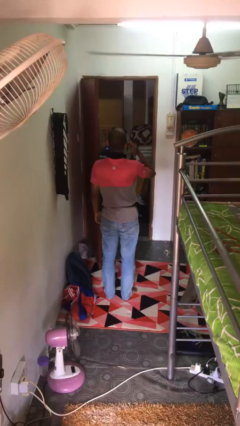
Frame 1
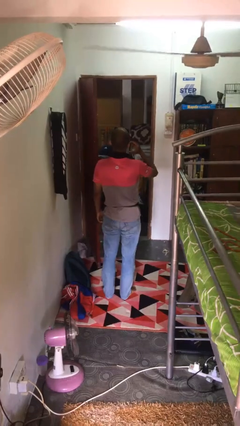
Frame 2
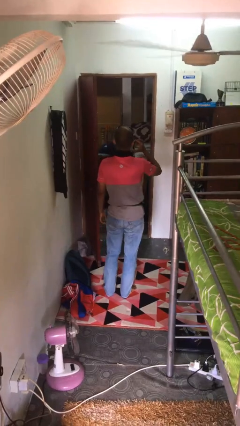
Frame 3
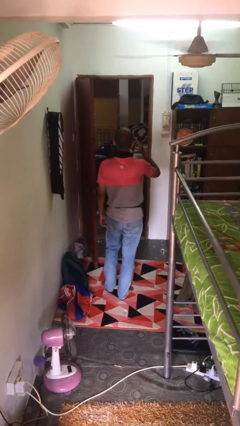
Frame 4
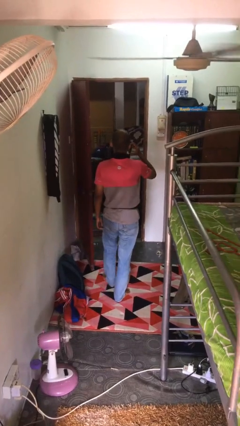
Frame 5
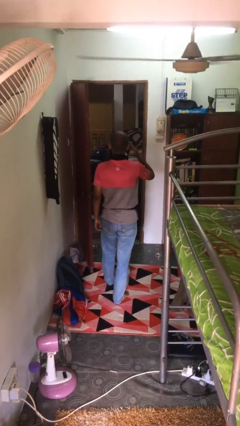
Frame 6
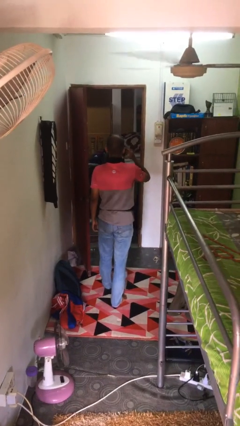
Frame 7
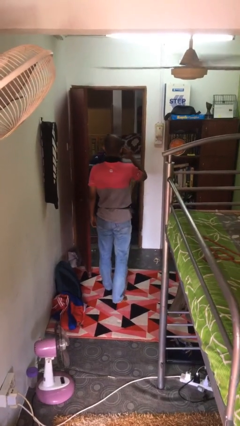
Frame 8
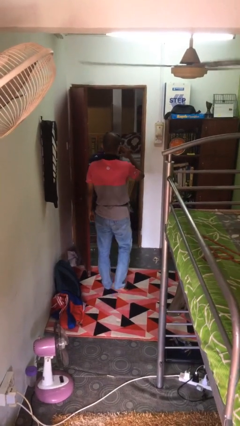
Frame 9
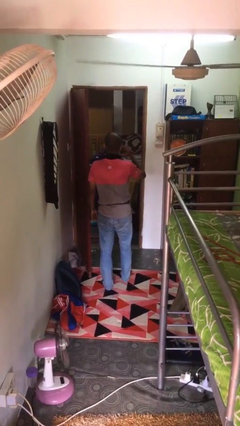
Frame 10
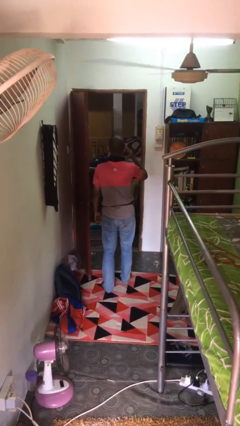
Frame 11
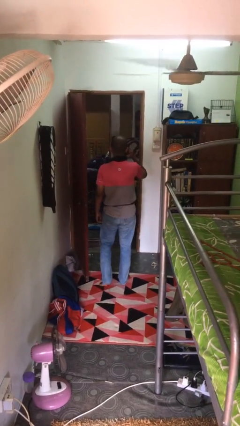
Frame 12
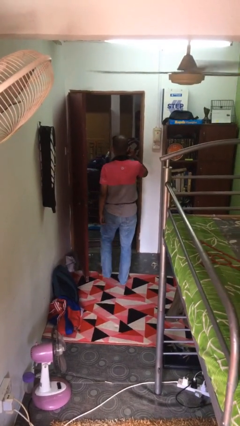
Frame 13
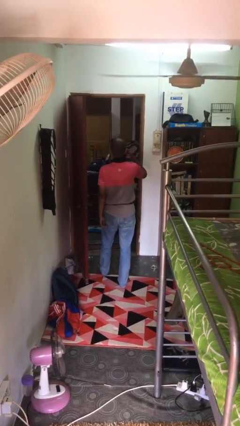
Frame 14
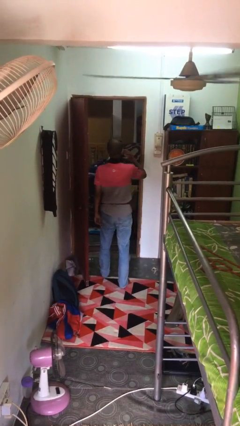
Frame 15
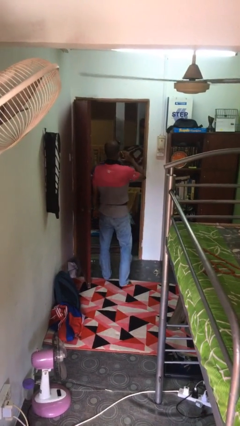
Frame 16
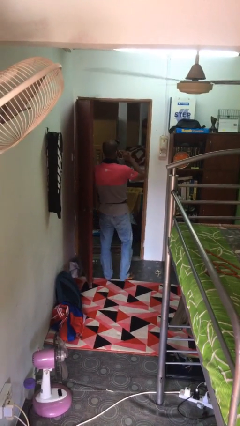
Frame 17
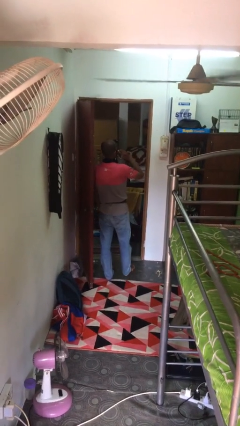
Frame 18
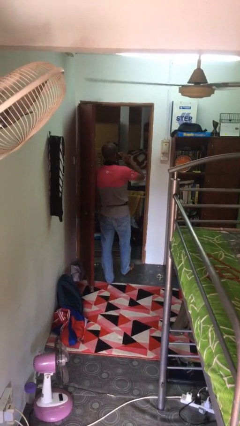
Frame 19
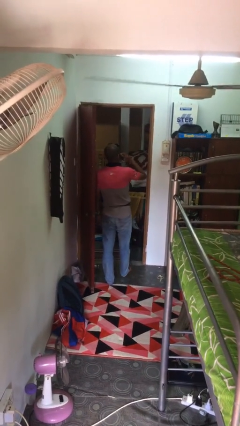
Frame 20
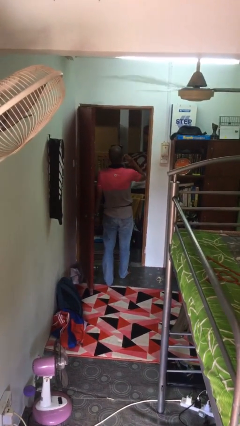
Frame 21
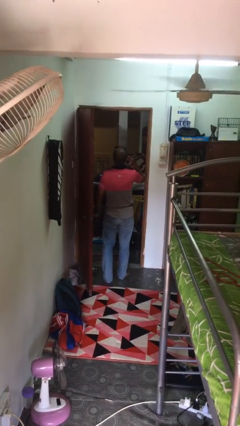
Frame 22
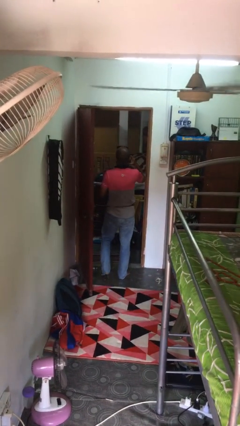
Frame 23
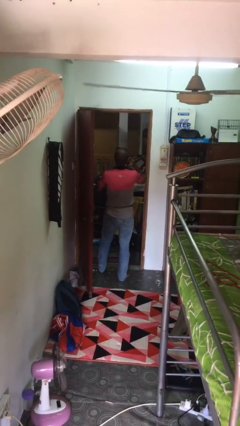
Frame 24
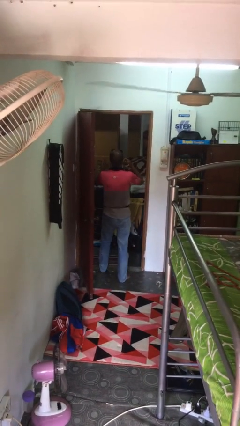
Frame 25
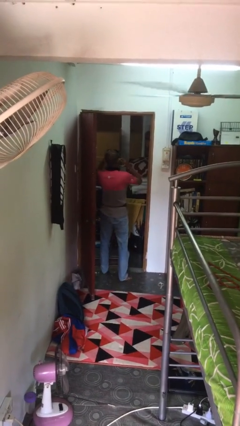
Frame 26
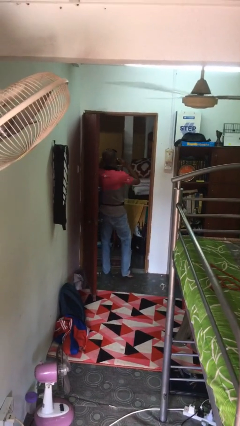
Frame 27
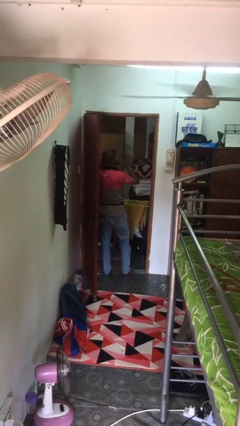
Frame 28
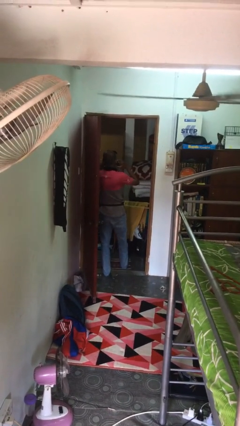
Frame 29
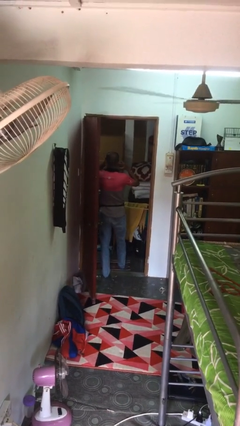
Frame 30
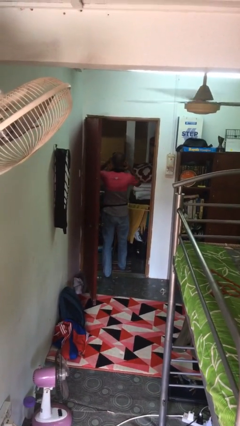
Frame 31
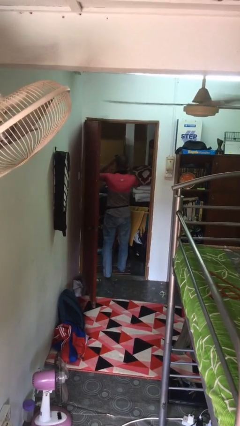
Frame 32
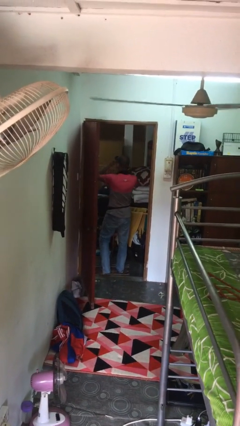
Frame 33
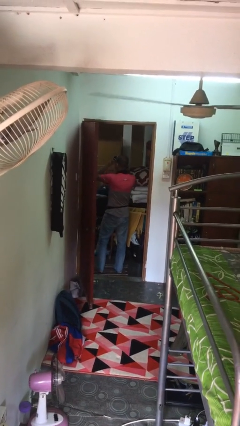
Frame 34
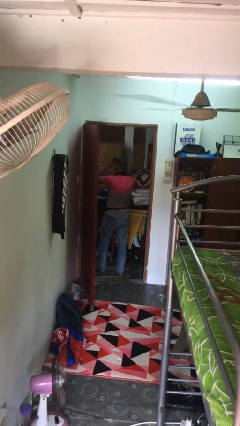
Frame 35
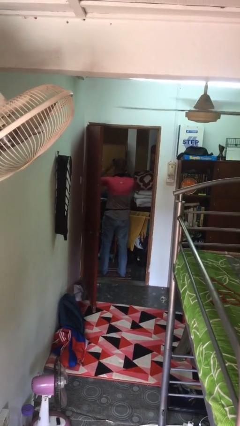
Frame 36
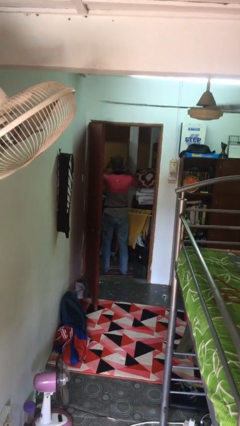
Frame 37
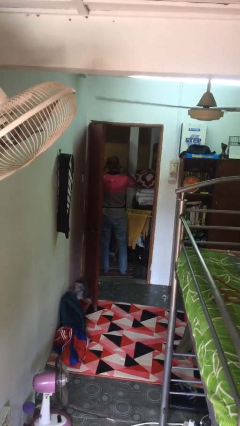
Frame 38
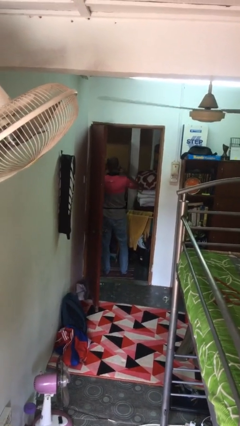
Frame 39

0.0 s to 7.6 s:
person exits scene through structure

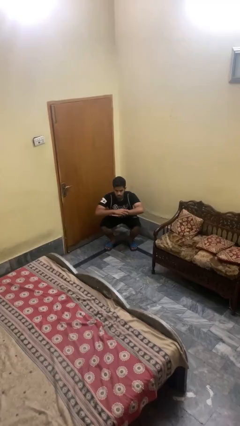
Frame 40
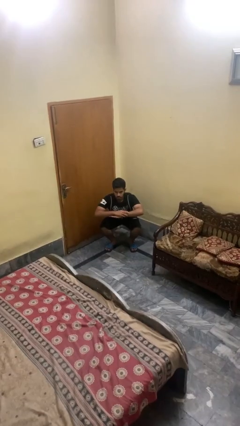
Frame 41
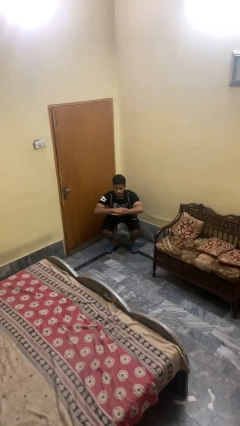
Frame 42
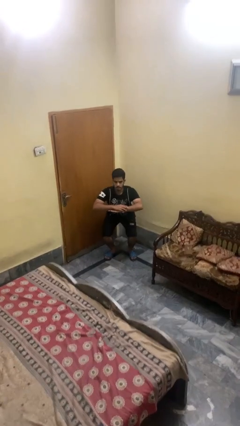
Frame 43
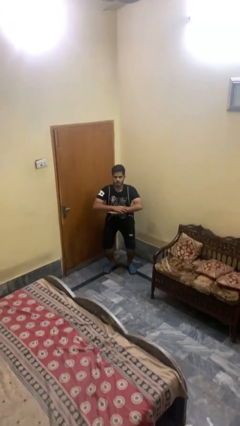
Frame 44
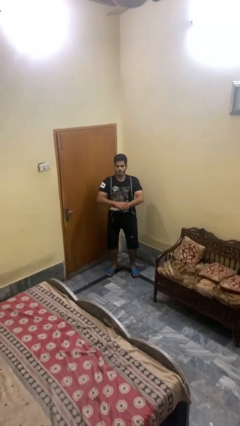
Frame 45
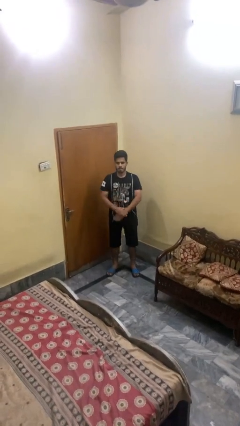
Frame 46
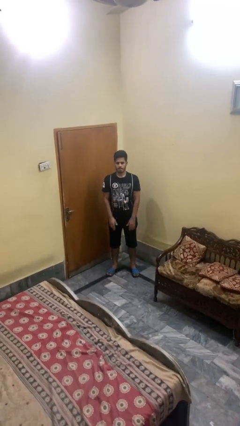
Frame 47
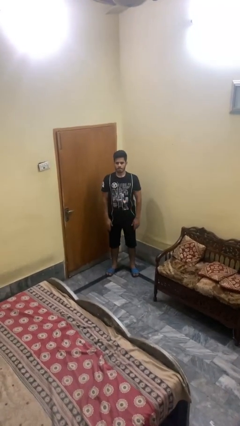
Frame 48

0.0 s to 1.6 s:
person stands up

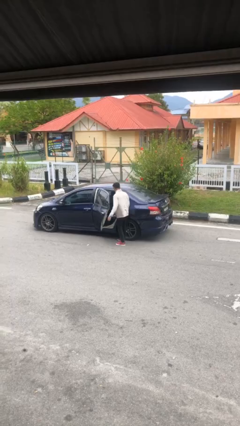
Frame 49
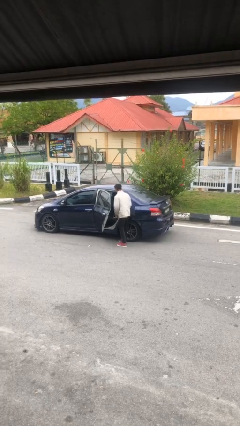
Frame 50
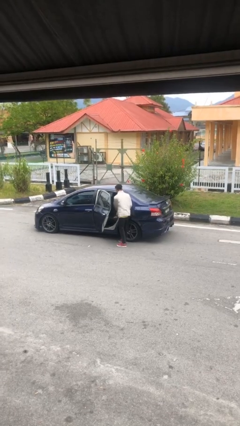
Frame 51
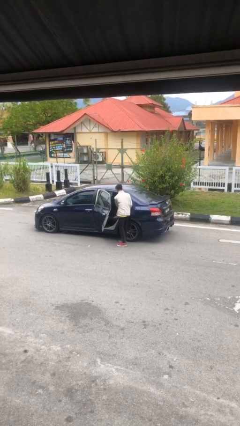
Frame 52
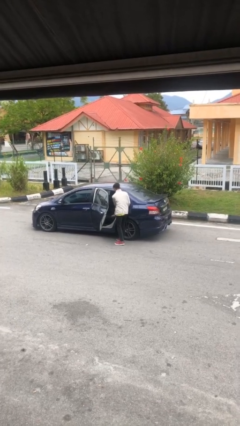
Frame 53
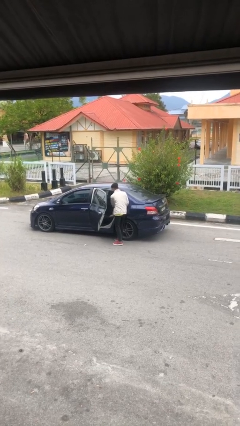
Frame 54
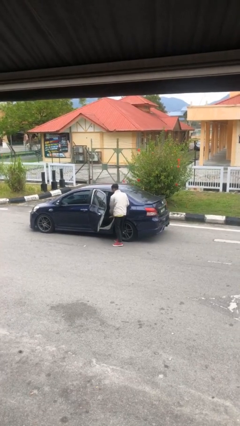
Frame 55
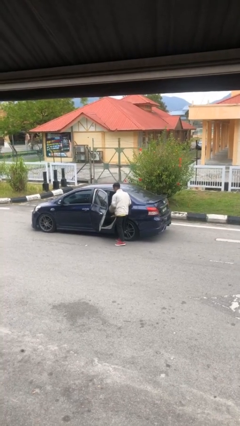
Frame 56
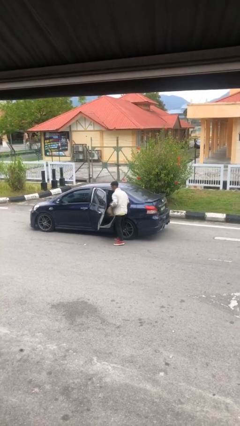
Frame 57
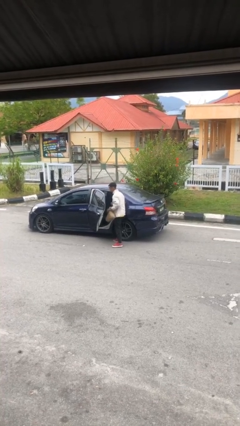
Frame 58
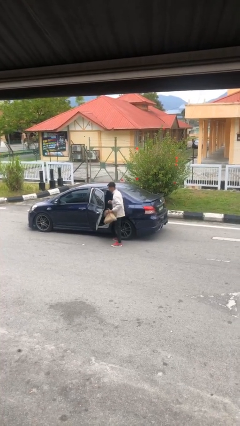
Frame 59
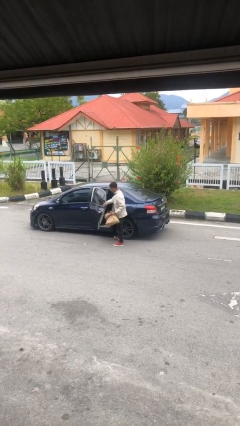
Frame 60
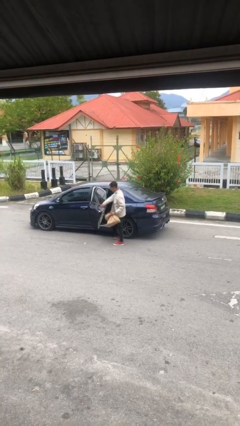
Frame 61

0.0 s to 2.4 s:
person unloads car

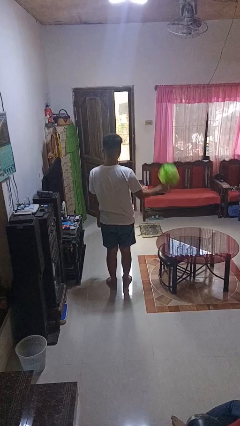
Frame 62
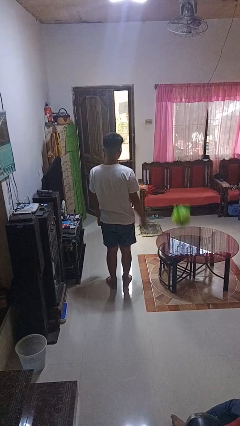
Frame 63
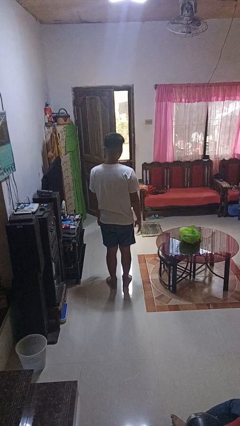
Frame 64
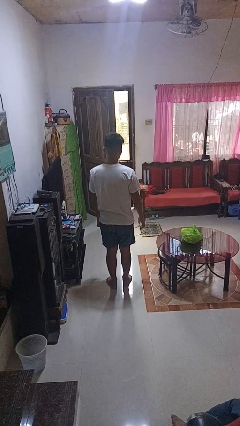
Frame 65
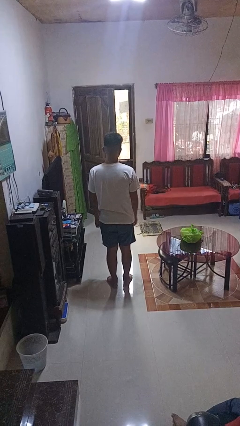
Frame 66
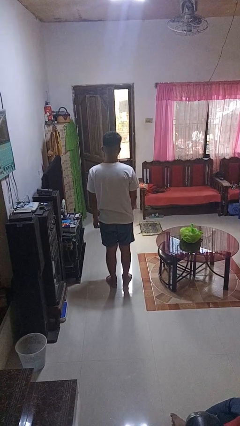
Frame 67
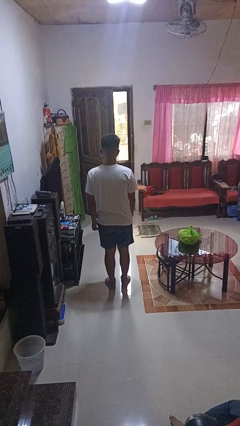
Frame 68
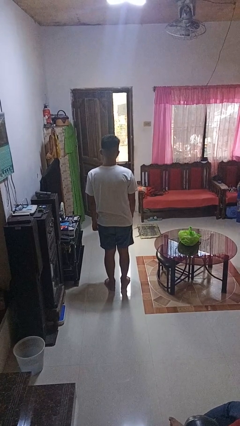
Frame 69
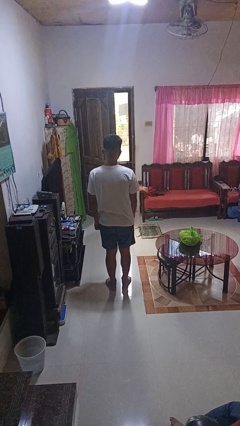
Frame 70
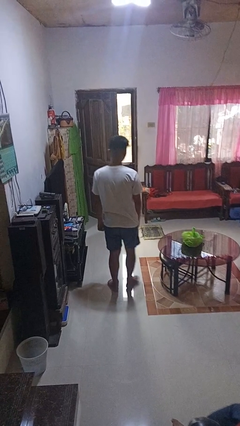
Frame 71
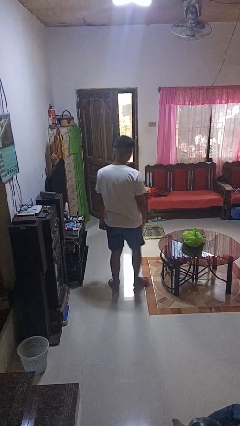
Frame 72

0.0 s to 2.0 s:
person throws object on table

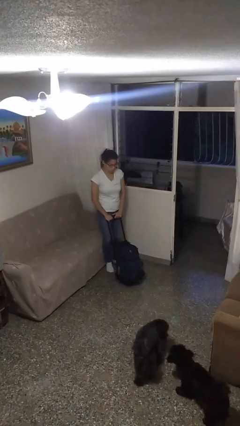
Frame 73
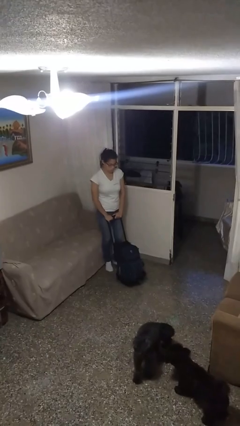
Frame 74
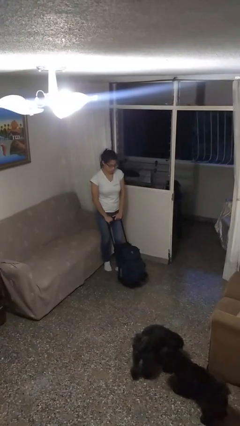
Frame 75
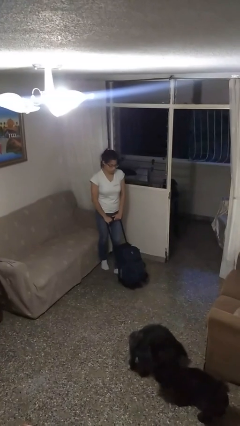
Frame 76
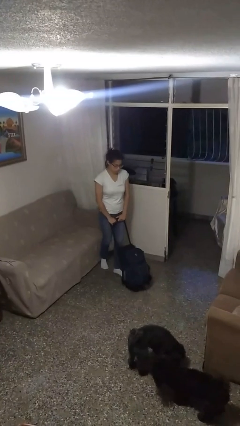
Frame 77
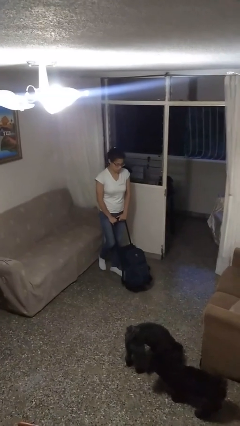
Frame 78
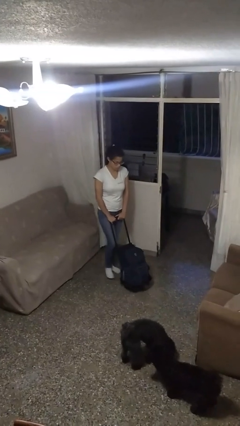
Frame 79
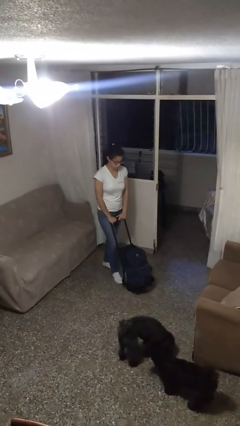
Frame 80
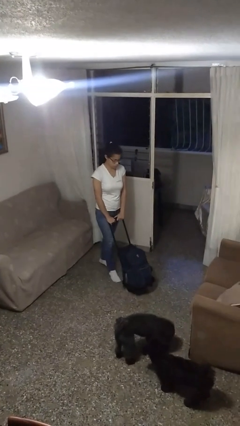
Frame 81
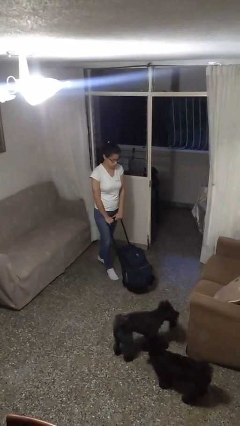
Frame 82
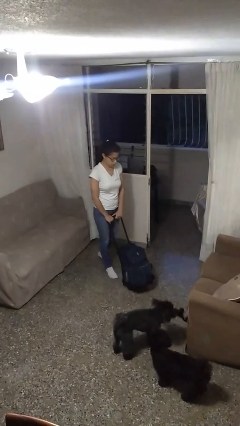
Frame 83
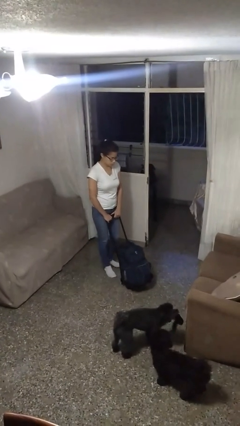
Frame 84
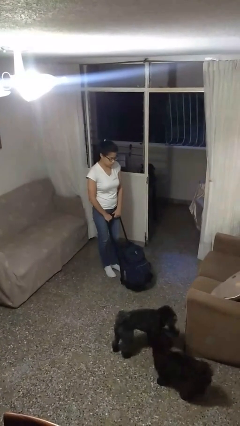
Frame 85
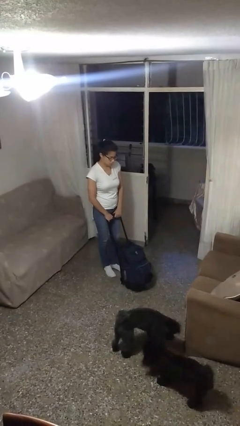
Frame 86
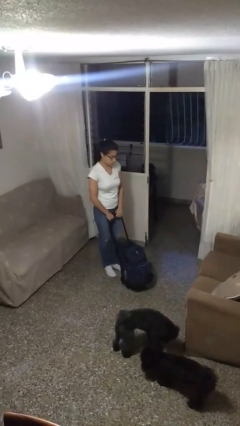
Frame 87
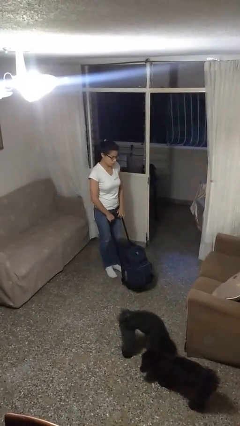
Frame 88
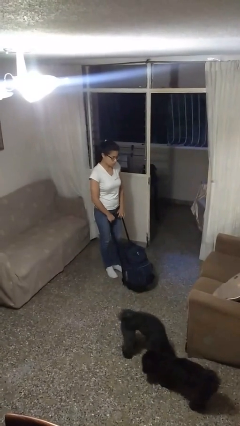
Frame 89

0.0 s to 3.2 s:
person pushes wheeled cart

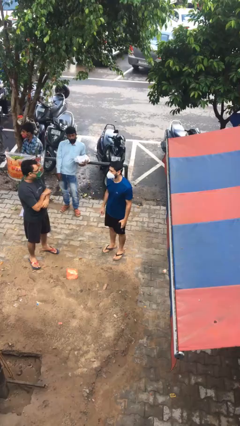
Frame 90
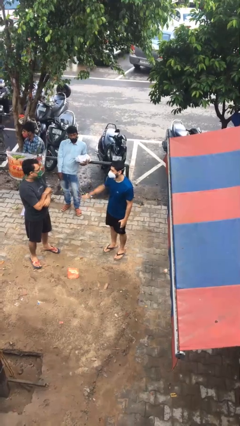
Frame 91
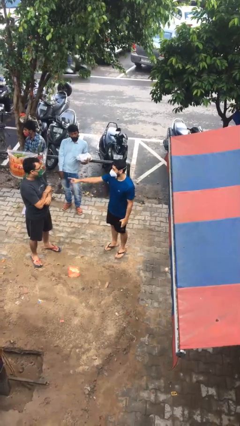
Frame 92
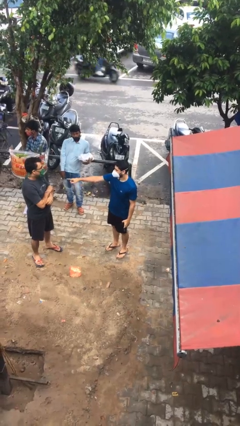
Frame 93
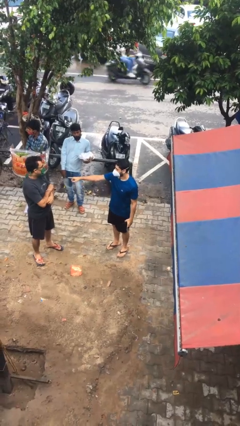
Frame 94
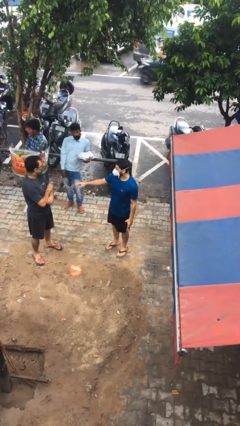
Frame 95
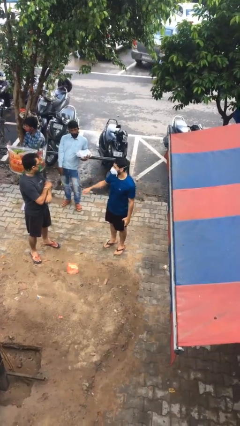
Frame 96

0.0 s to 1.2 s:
person points at person
